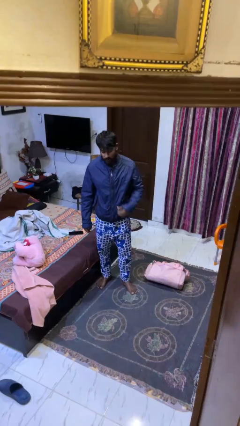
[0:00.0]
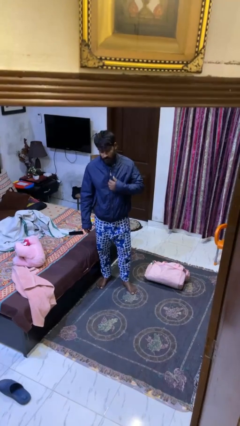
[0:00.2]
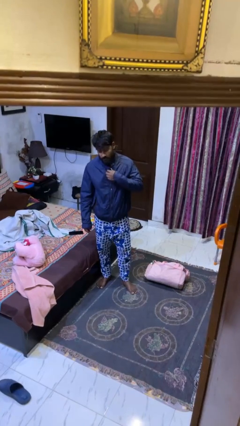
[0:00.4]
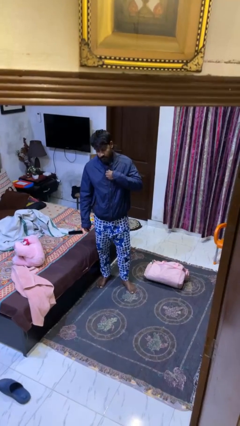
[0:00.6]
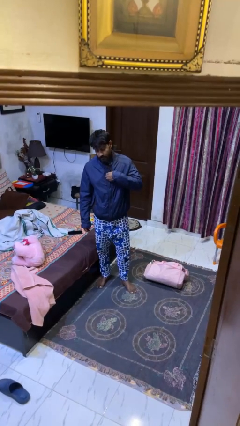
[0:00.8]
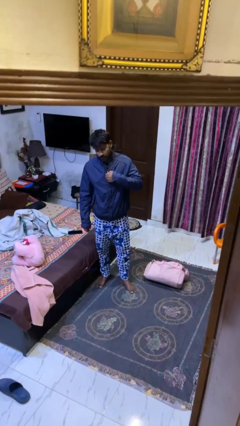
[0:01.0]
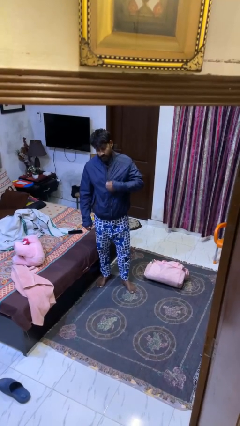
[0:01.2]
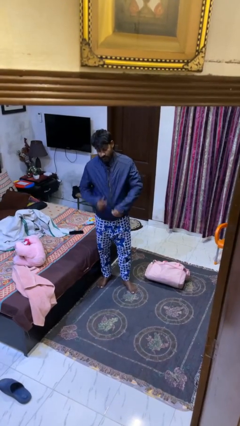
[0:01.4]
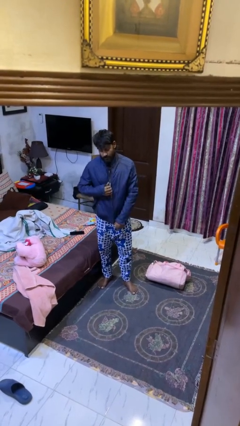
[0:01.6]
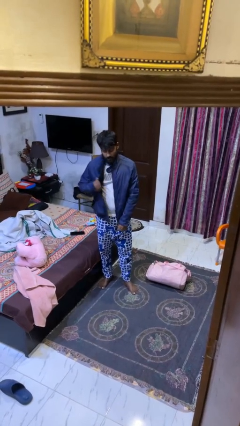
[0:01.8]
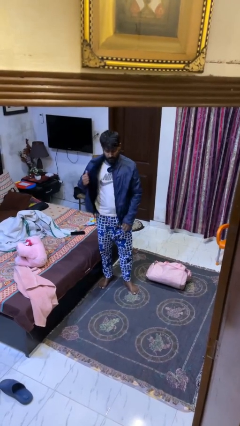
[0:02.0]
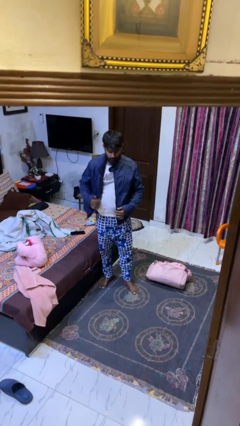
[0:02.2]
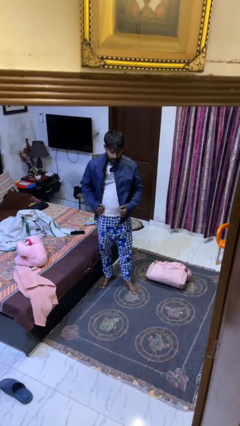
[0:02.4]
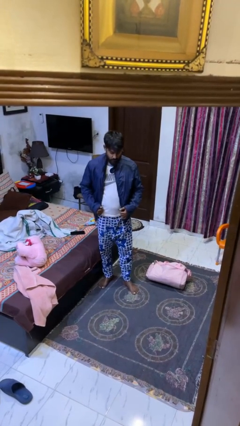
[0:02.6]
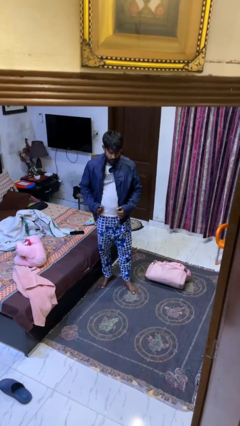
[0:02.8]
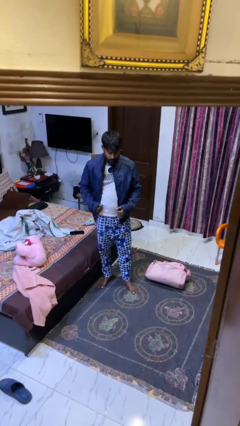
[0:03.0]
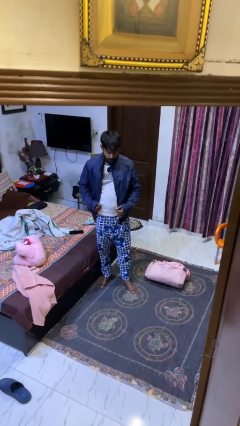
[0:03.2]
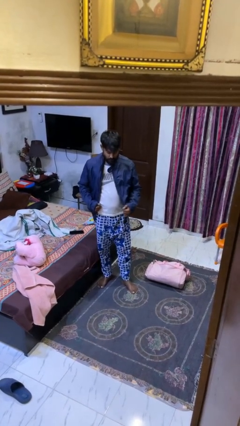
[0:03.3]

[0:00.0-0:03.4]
person unzips jacket

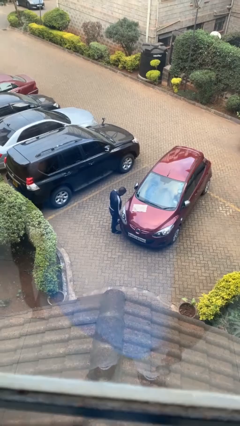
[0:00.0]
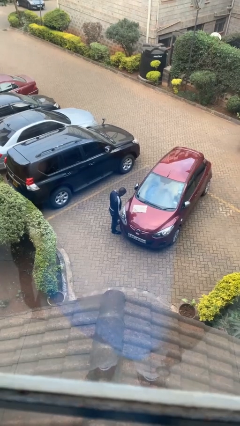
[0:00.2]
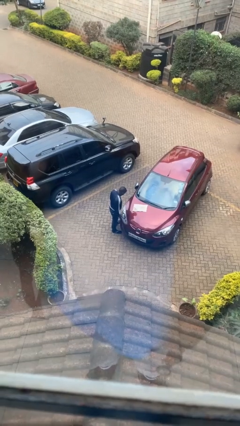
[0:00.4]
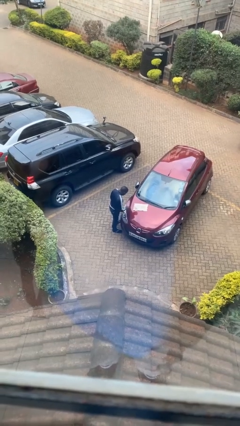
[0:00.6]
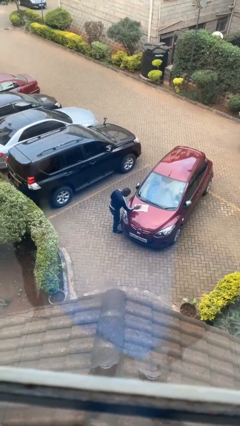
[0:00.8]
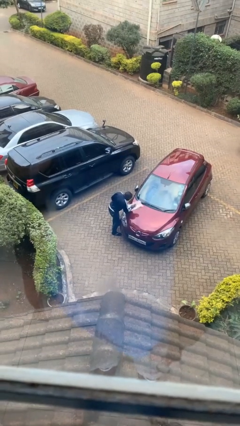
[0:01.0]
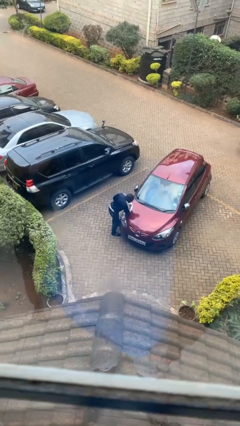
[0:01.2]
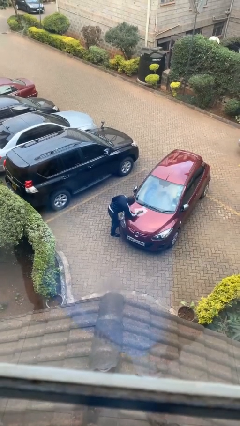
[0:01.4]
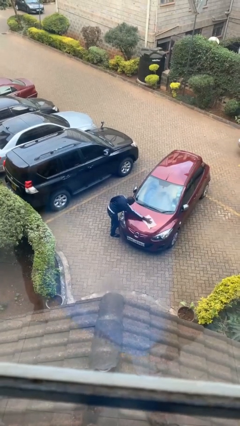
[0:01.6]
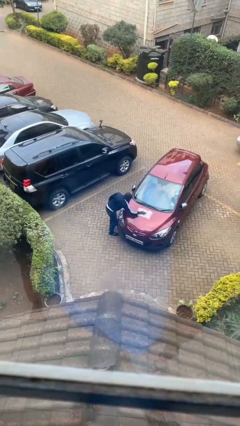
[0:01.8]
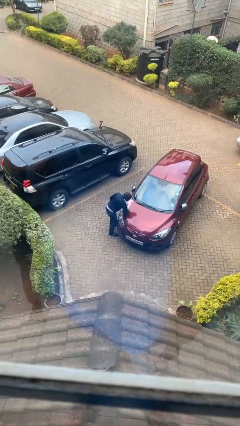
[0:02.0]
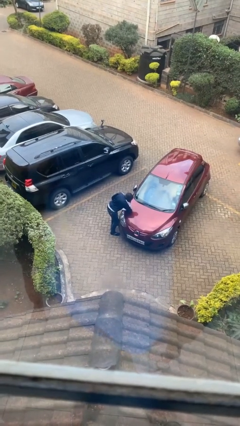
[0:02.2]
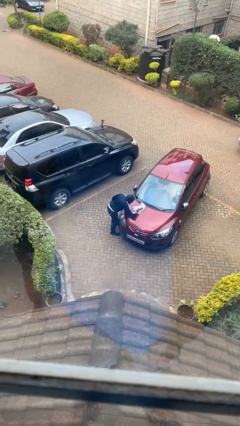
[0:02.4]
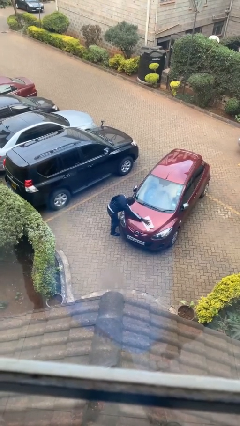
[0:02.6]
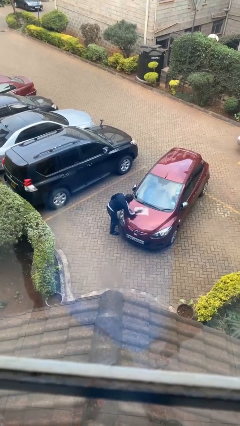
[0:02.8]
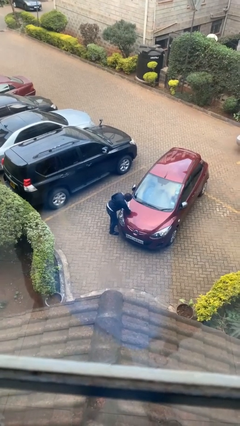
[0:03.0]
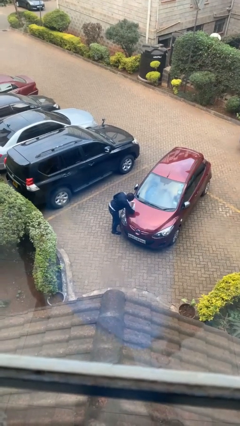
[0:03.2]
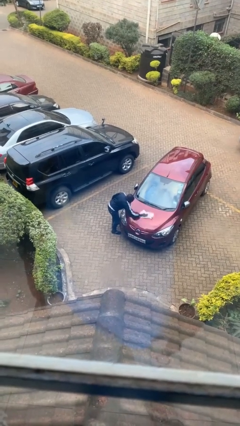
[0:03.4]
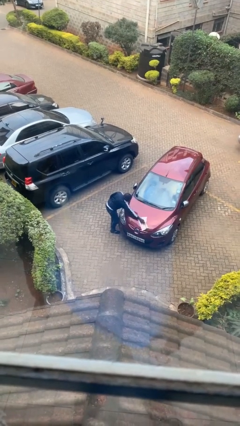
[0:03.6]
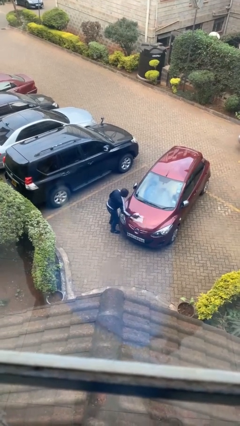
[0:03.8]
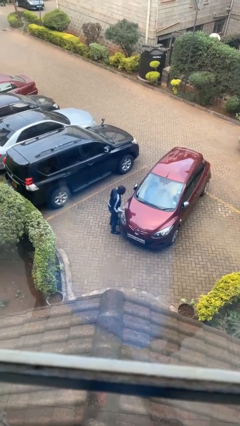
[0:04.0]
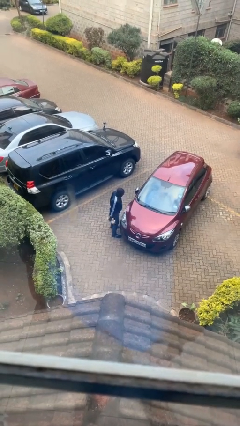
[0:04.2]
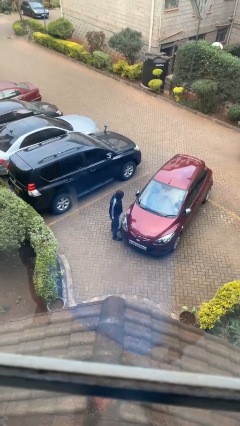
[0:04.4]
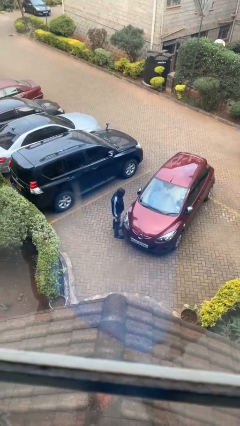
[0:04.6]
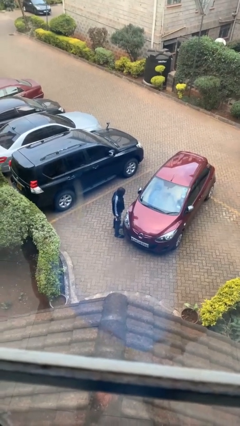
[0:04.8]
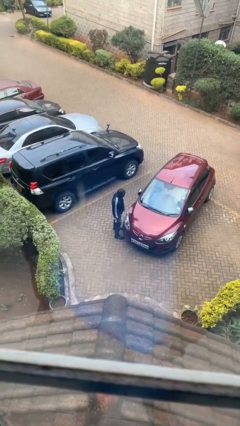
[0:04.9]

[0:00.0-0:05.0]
person polishes car with rag

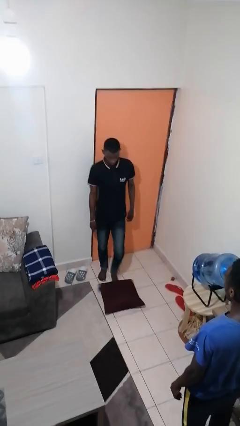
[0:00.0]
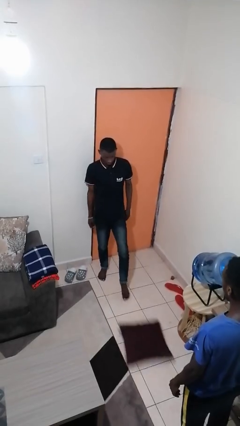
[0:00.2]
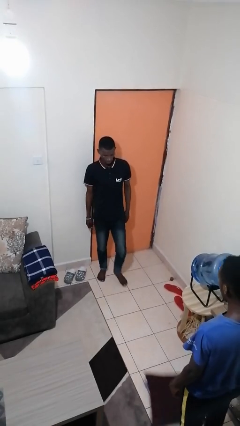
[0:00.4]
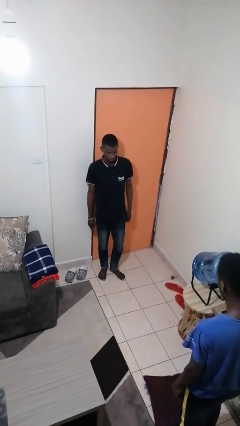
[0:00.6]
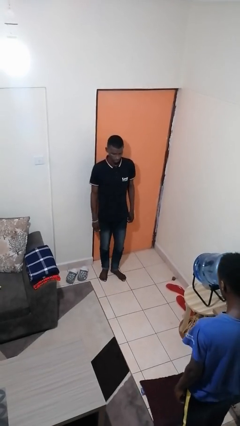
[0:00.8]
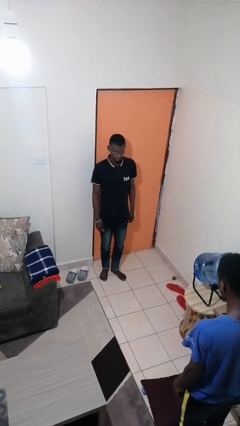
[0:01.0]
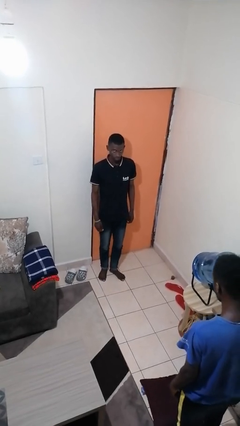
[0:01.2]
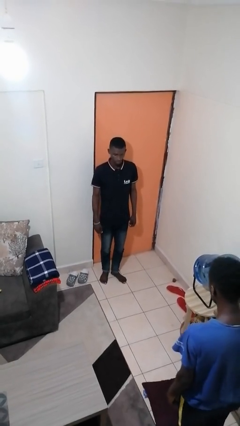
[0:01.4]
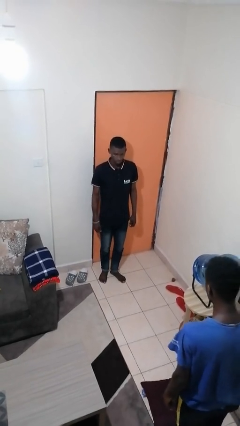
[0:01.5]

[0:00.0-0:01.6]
person kicks object to person

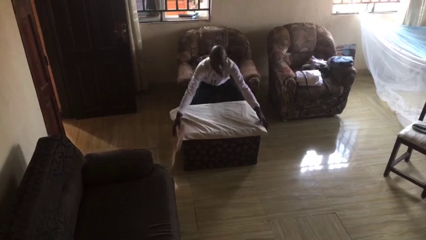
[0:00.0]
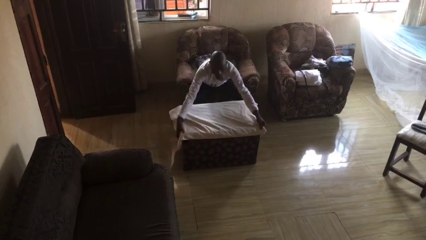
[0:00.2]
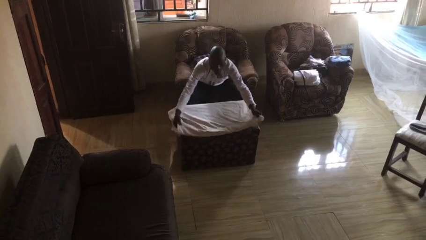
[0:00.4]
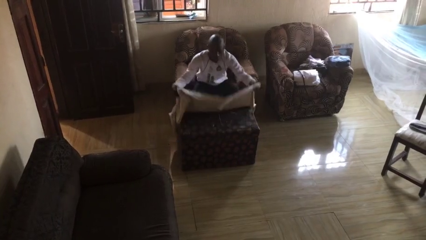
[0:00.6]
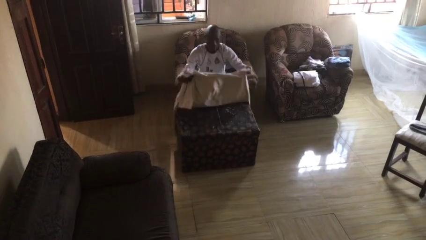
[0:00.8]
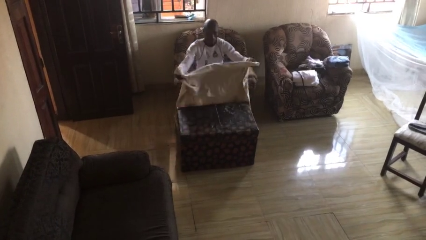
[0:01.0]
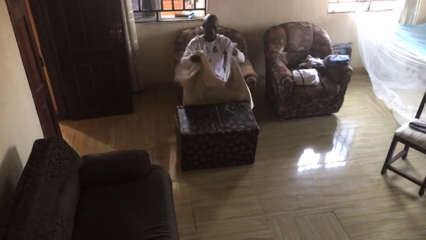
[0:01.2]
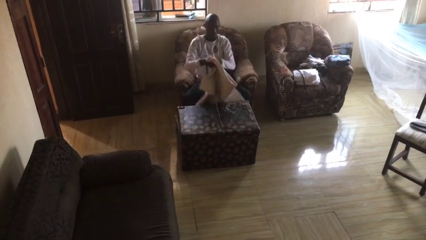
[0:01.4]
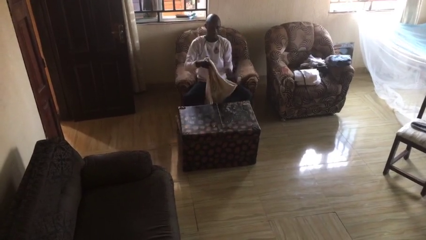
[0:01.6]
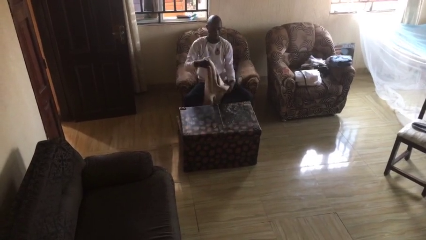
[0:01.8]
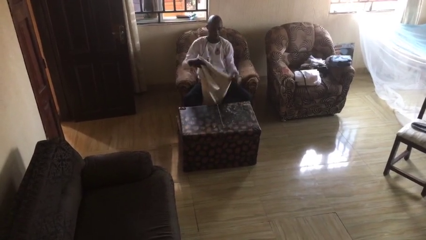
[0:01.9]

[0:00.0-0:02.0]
person folds tablecloth

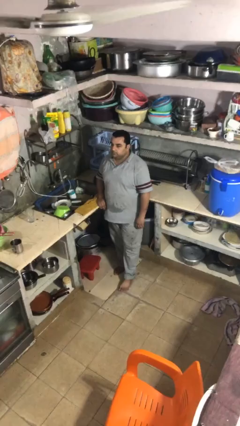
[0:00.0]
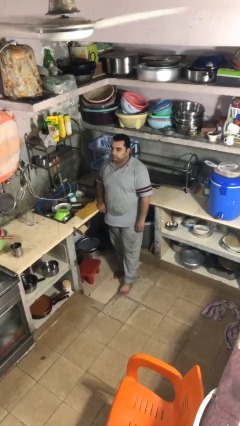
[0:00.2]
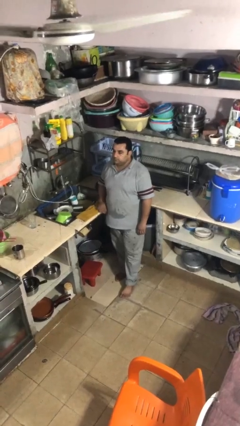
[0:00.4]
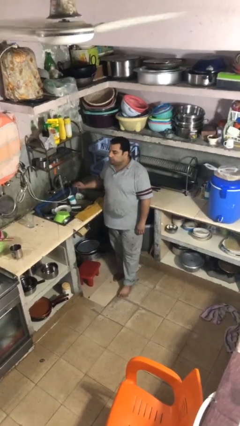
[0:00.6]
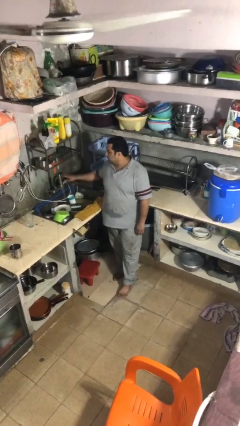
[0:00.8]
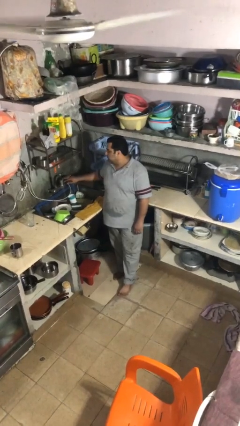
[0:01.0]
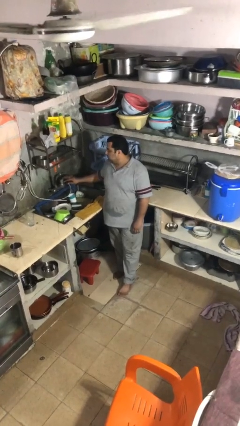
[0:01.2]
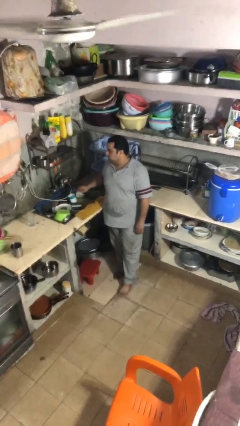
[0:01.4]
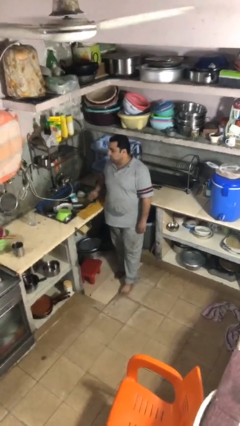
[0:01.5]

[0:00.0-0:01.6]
person turns off faucet

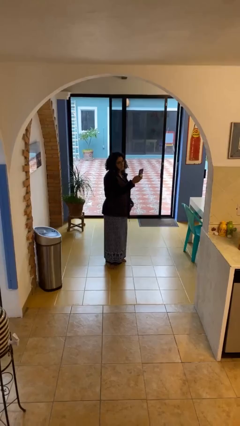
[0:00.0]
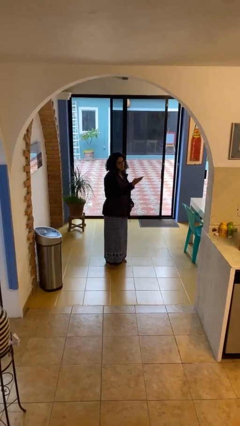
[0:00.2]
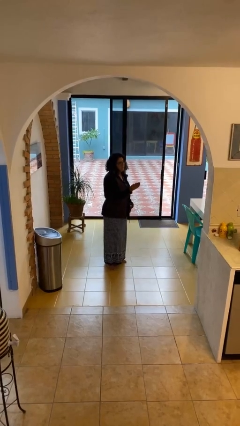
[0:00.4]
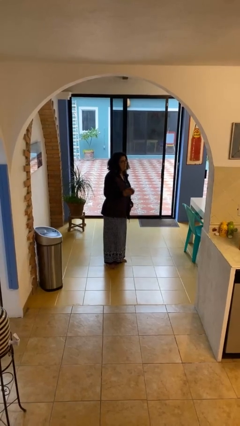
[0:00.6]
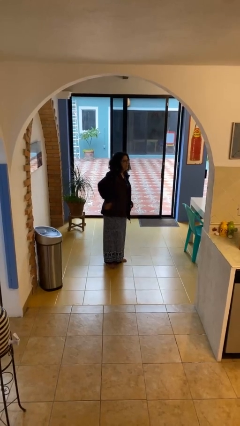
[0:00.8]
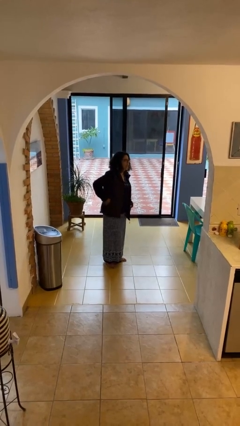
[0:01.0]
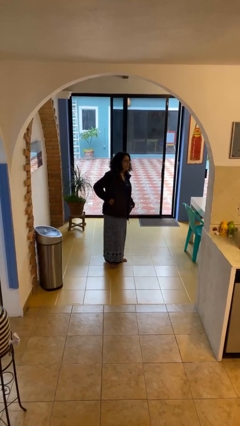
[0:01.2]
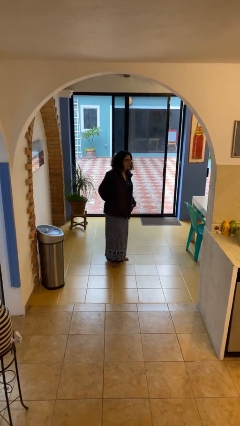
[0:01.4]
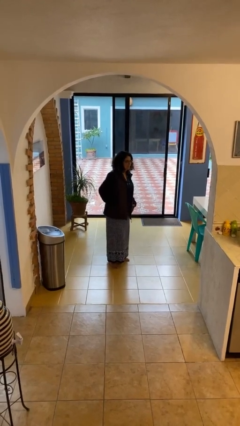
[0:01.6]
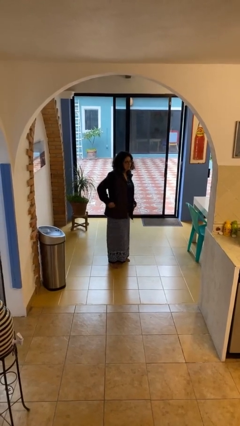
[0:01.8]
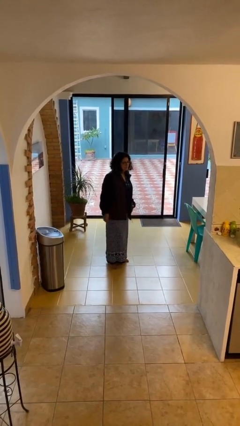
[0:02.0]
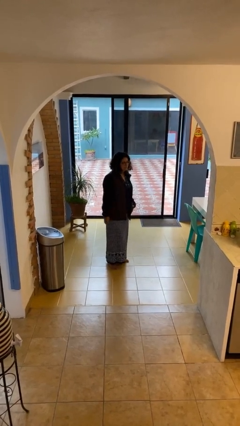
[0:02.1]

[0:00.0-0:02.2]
person puts phone into pocket

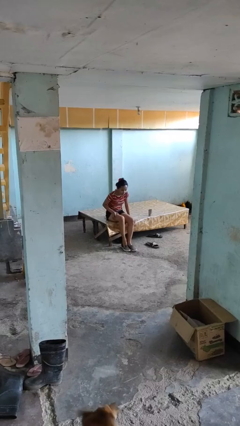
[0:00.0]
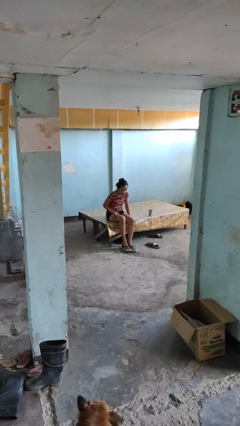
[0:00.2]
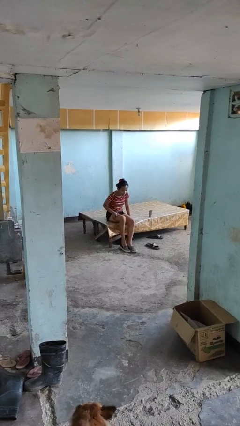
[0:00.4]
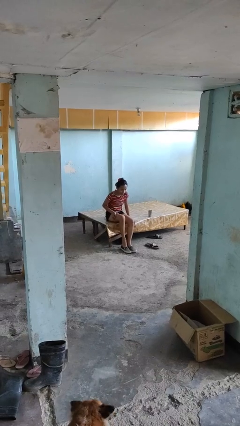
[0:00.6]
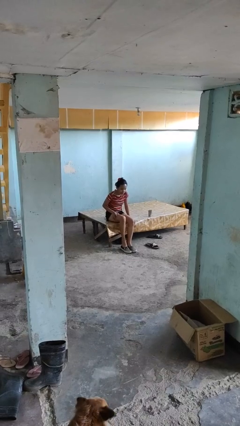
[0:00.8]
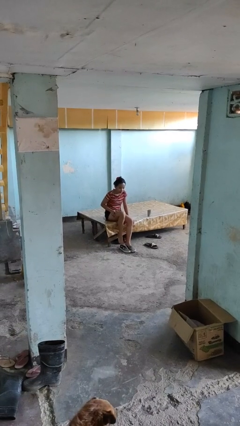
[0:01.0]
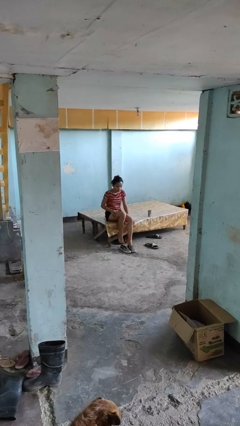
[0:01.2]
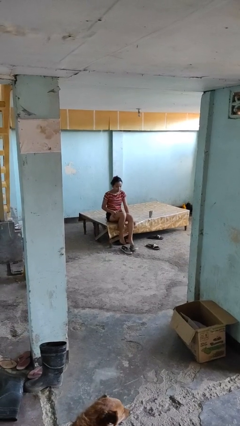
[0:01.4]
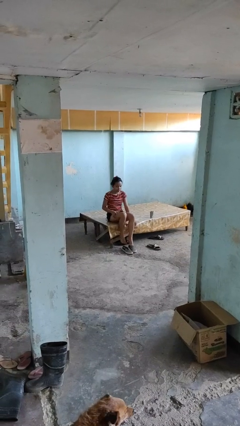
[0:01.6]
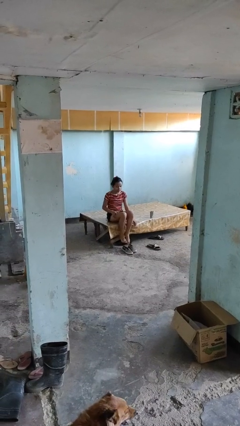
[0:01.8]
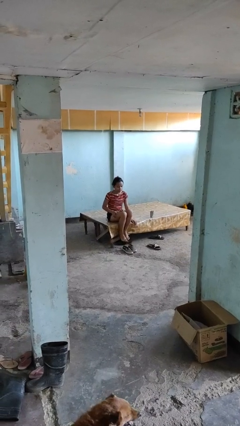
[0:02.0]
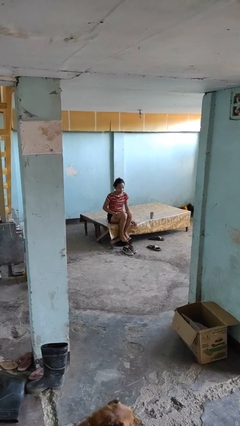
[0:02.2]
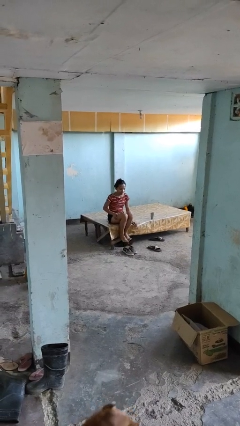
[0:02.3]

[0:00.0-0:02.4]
person takes off shoes
